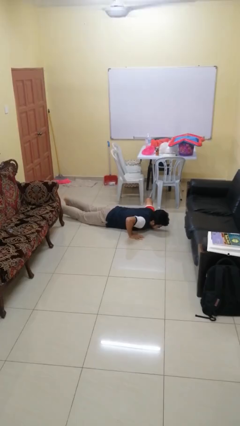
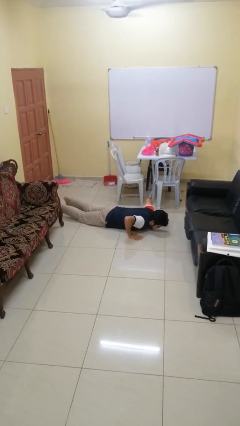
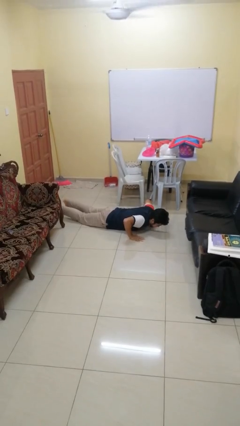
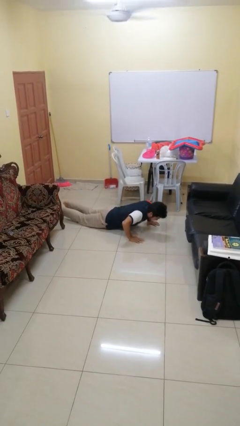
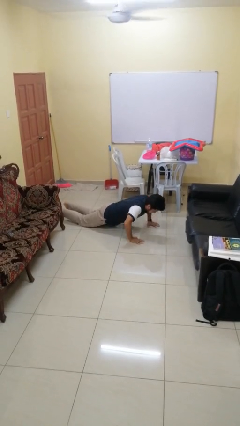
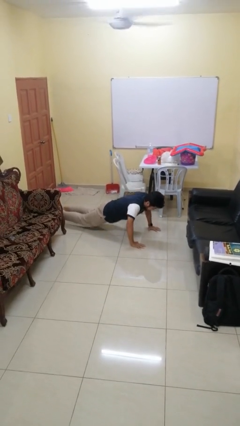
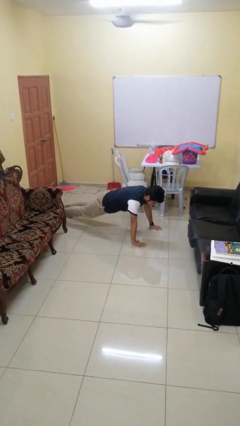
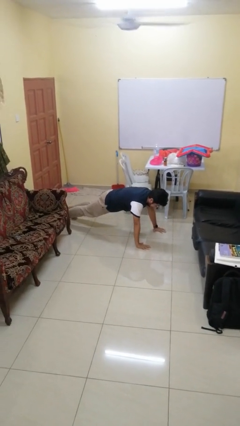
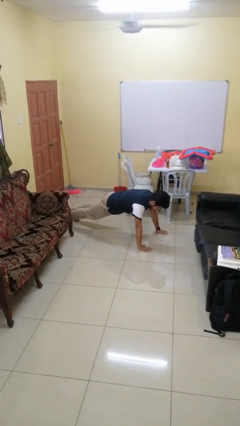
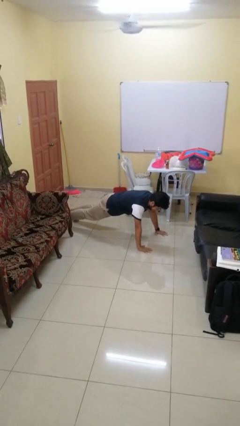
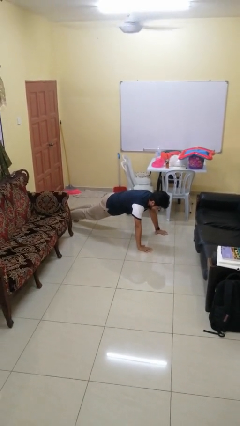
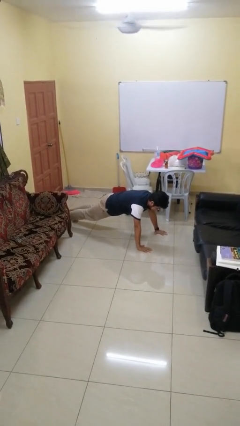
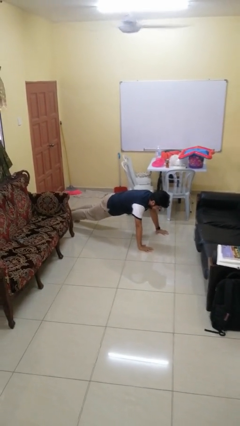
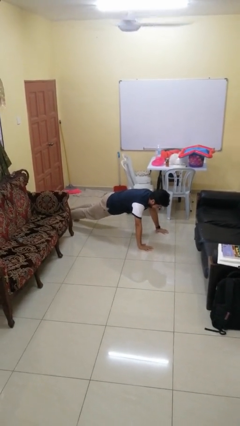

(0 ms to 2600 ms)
person exercises with pushup

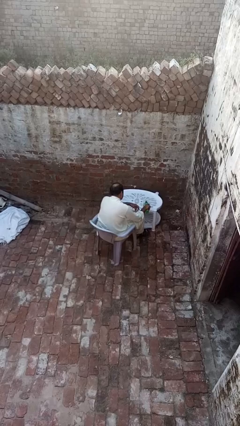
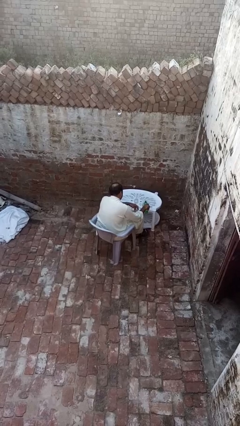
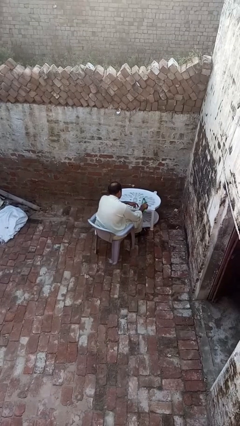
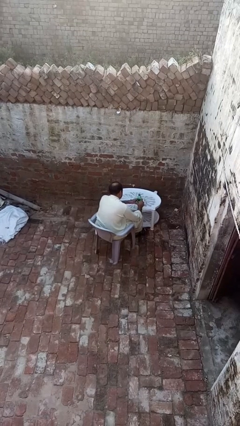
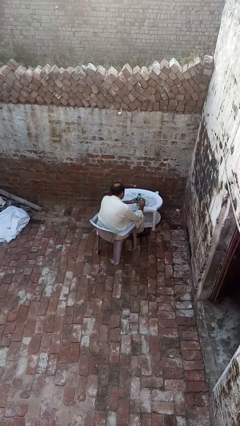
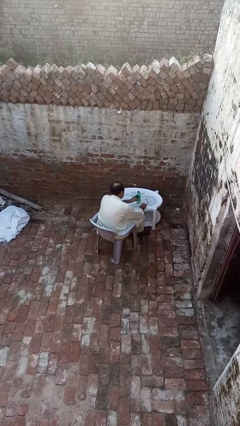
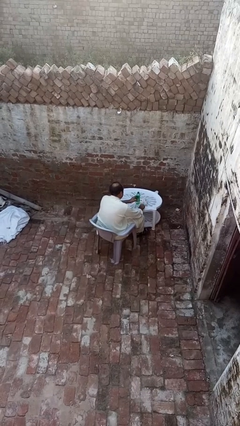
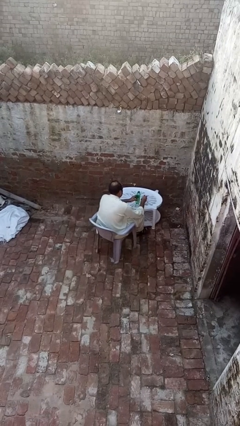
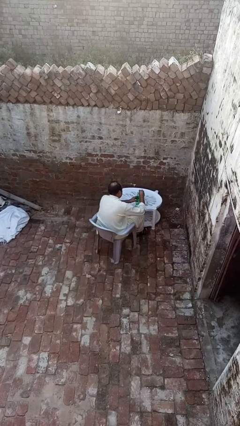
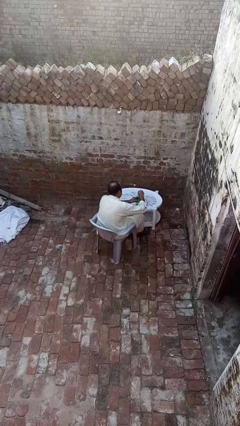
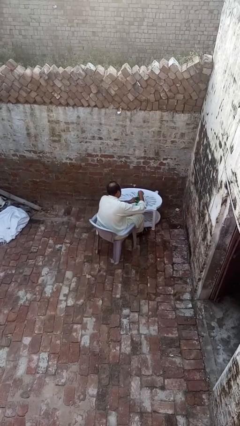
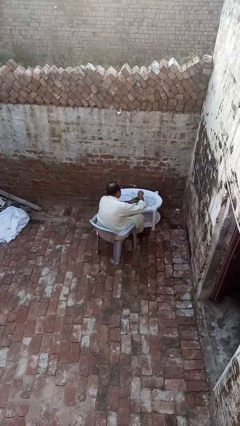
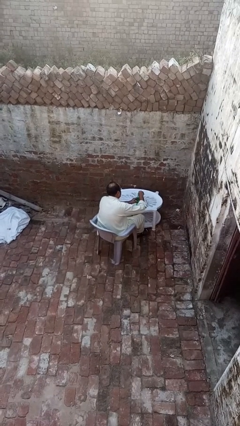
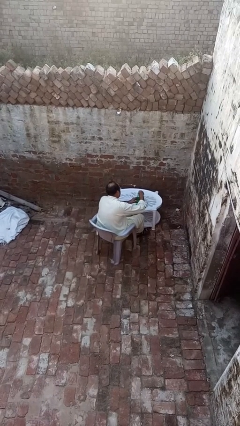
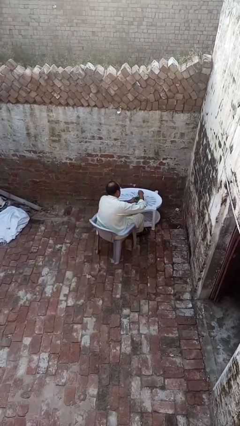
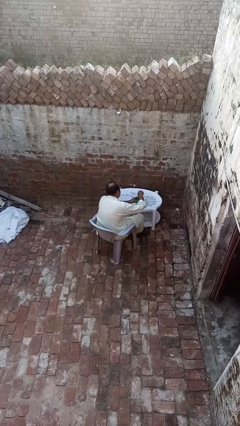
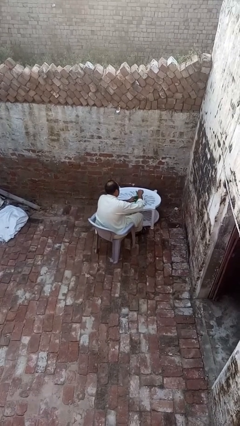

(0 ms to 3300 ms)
person screws lid to bottle

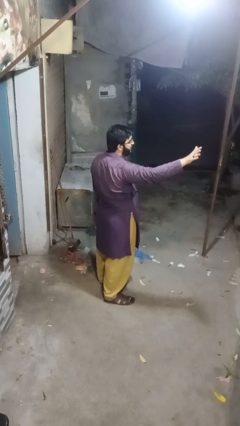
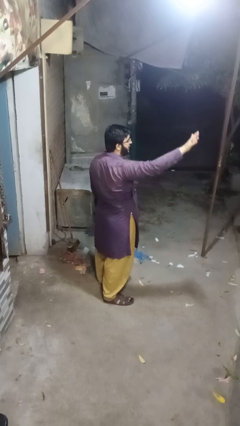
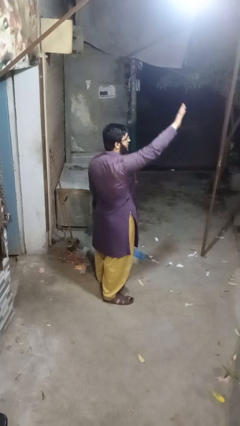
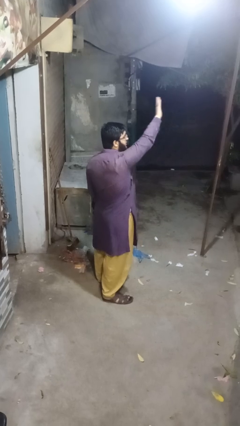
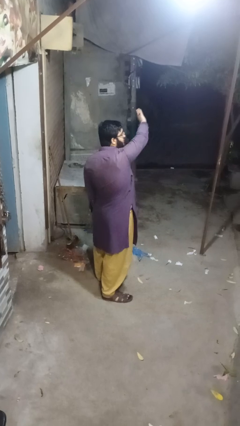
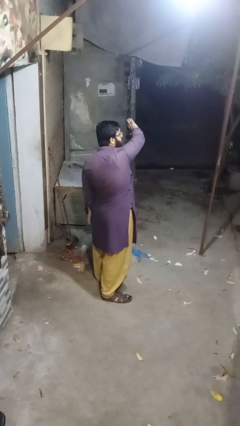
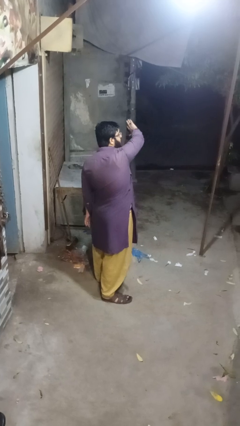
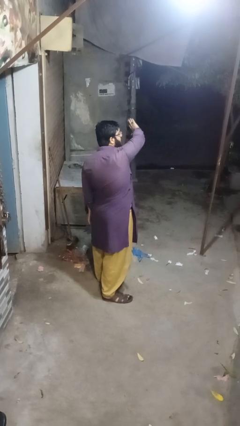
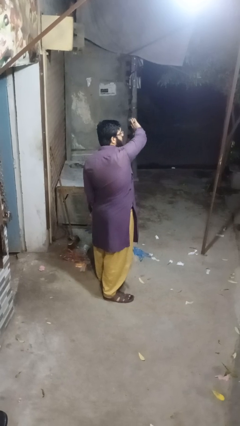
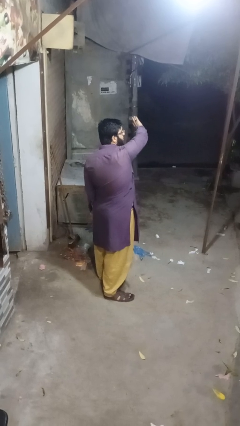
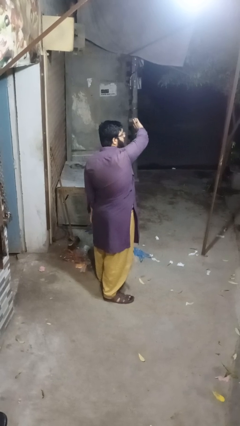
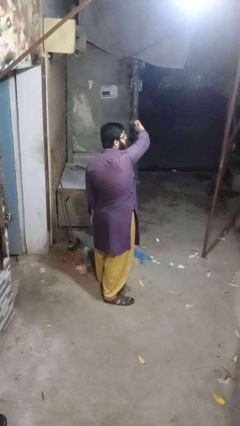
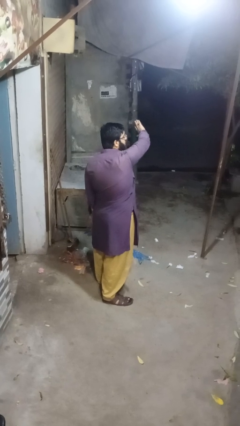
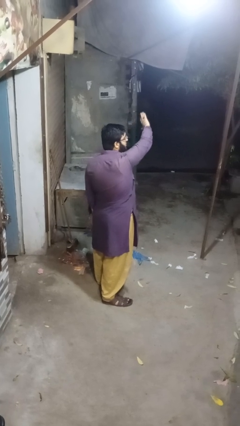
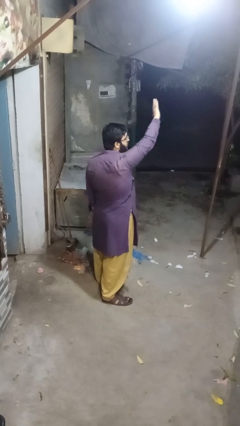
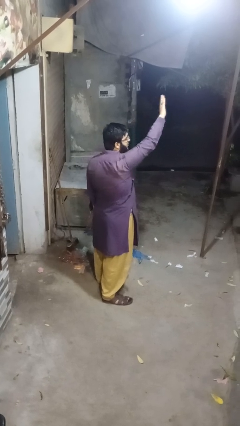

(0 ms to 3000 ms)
person gestures swipe left

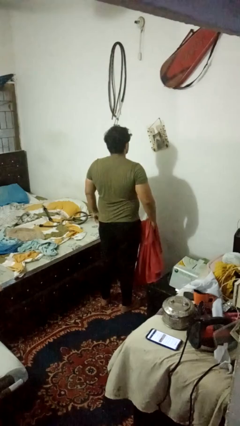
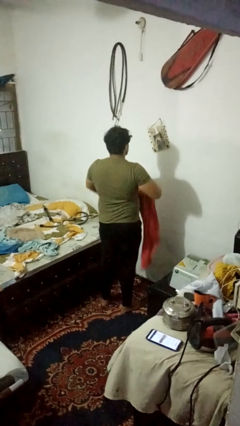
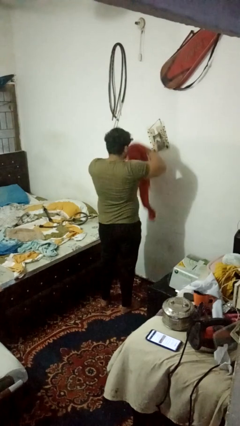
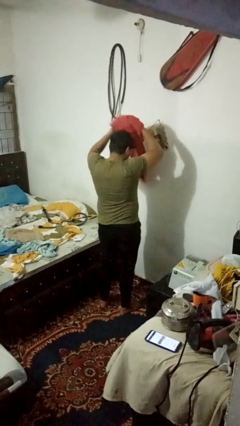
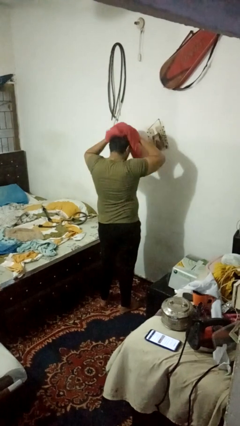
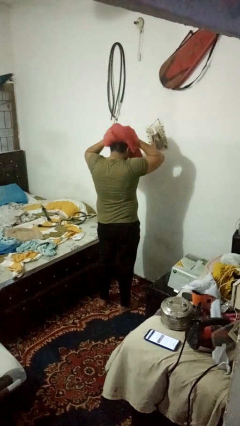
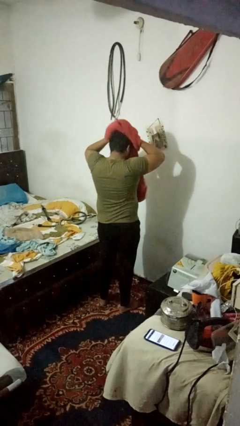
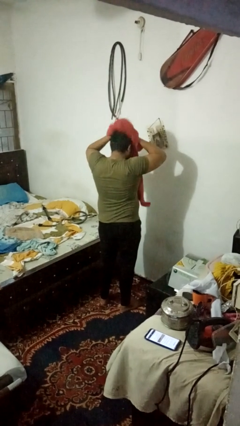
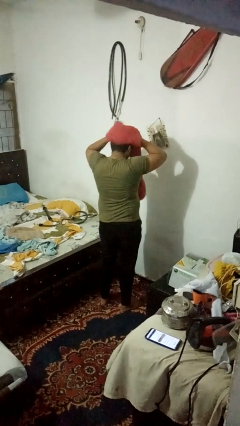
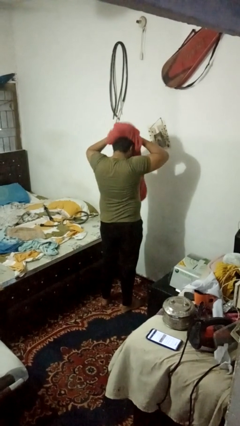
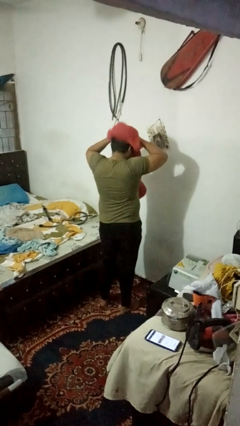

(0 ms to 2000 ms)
person dries hair with towel

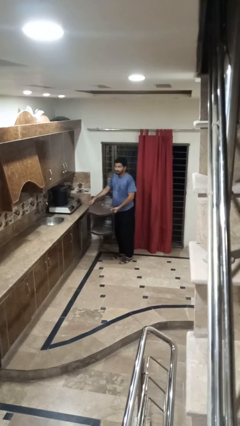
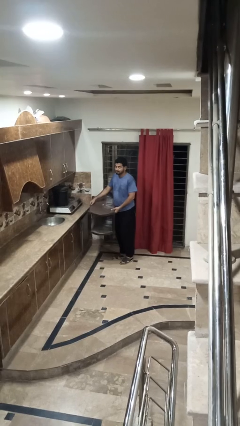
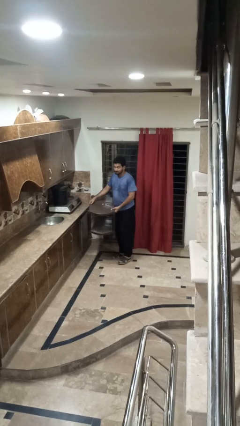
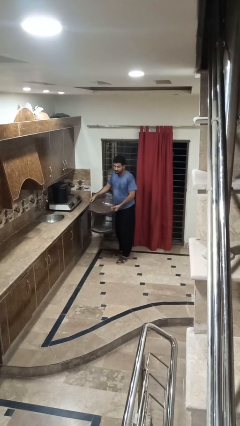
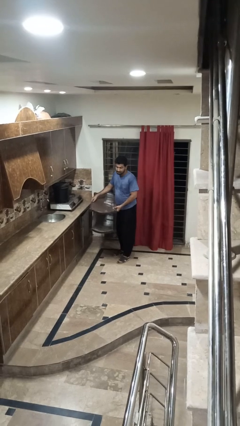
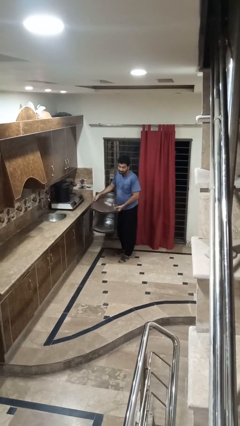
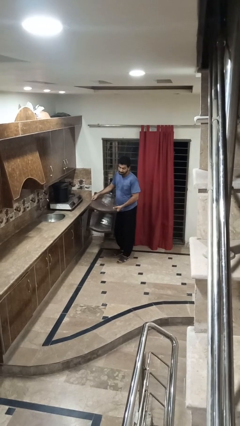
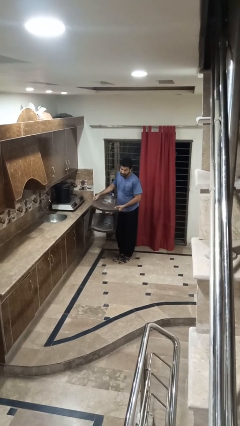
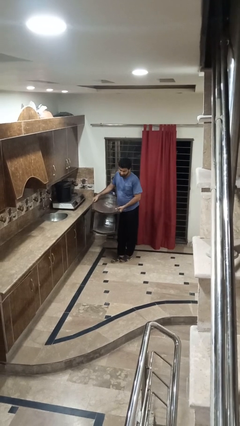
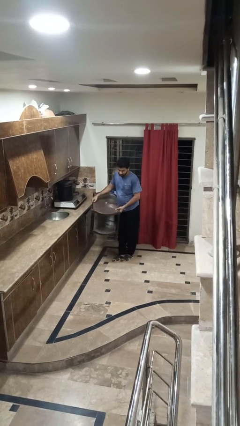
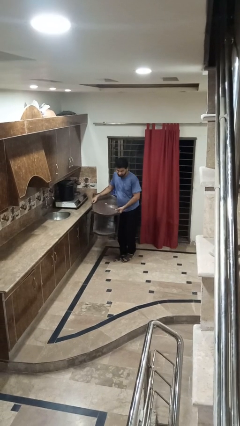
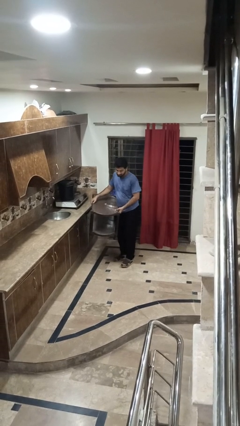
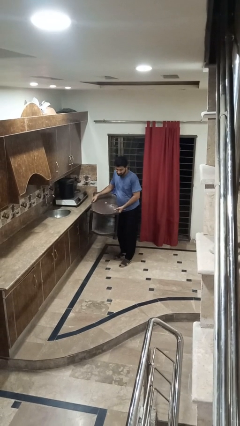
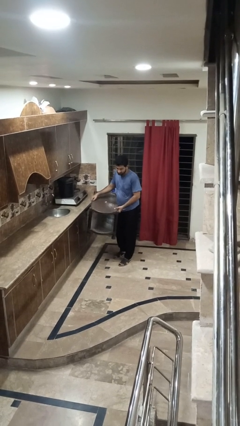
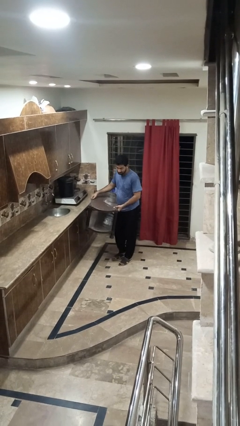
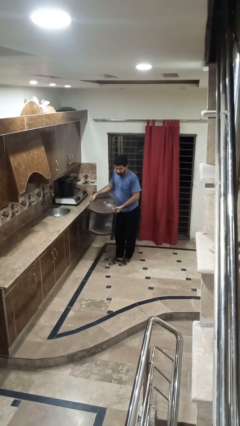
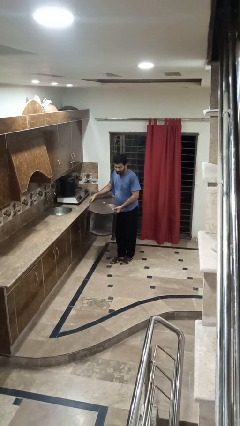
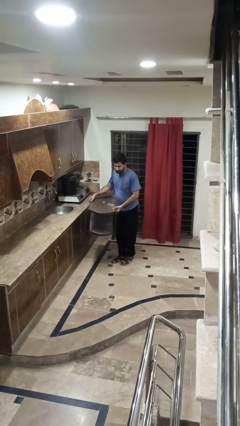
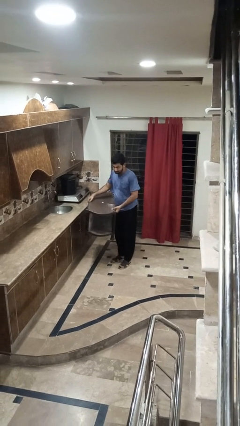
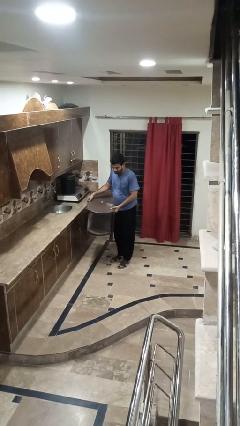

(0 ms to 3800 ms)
person carries furniture

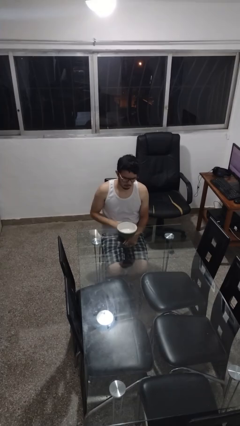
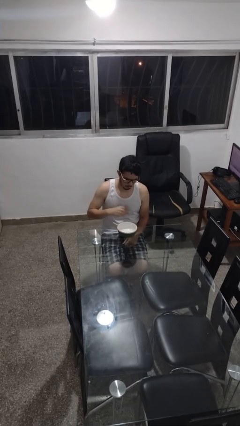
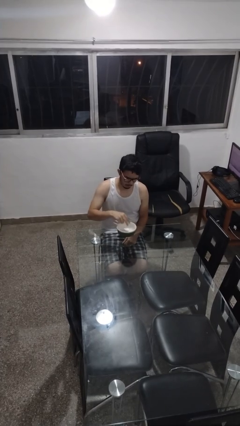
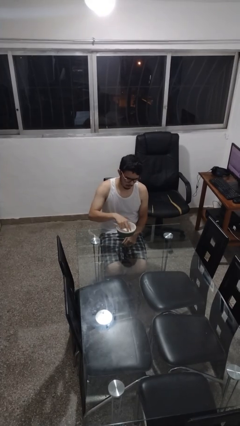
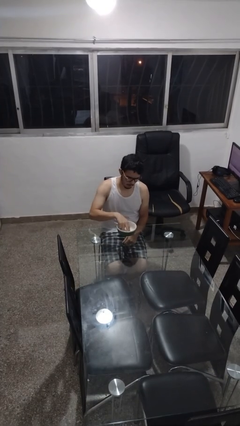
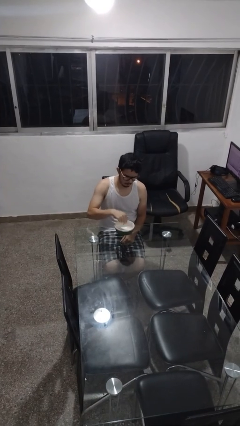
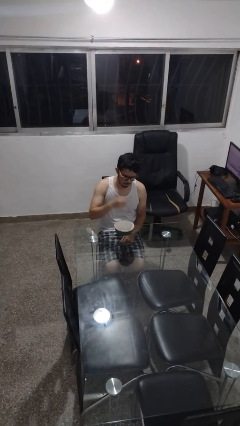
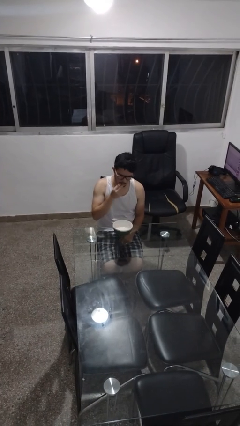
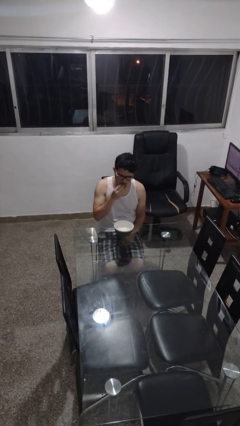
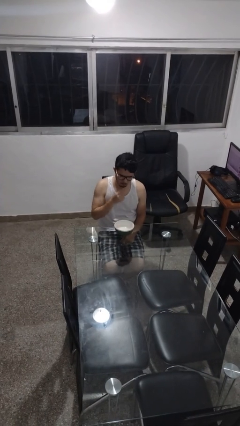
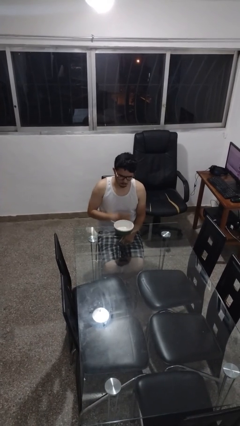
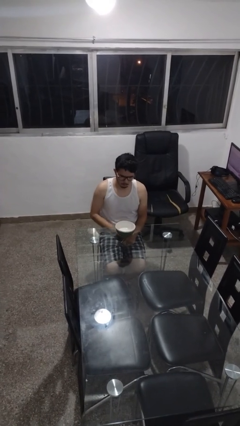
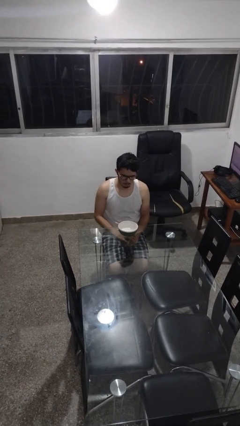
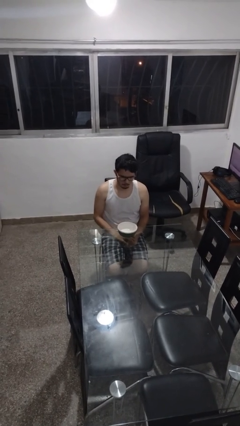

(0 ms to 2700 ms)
person eats with hands

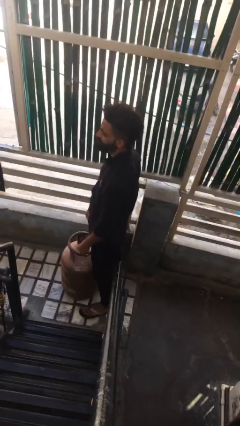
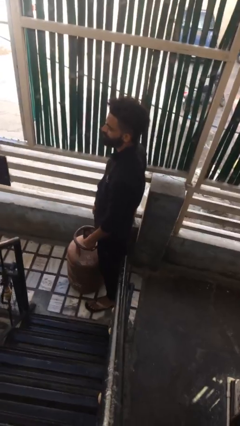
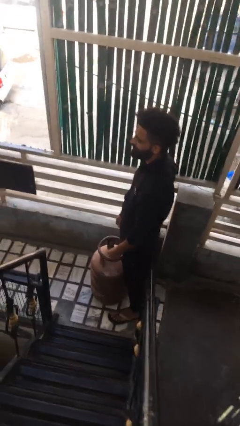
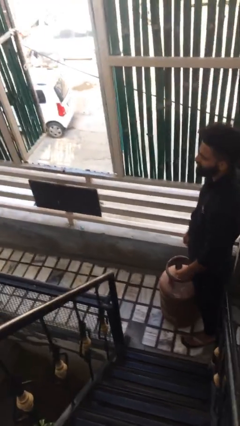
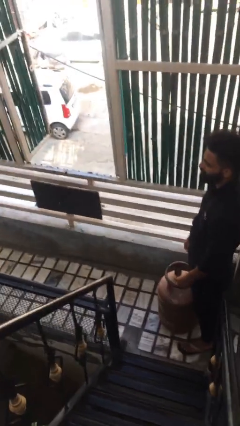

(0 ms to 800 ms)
person puts down object on floor
